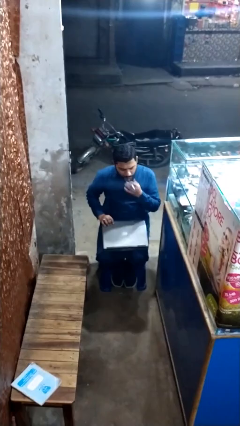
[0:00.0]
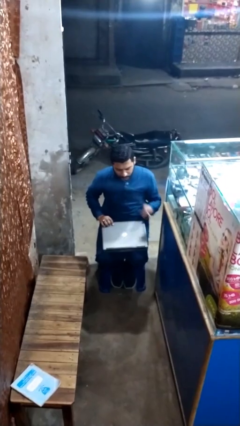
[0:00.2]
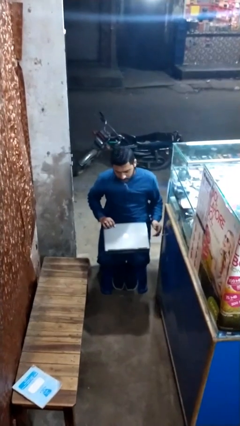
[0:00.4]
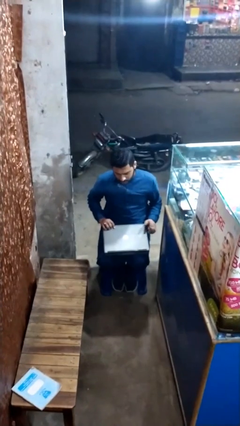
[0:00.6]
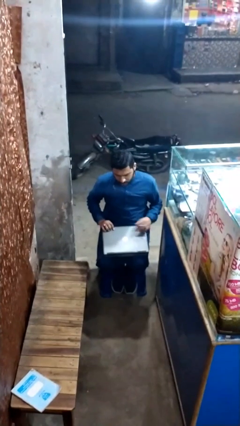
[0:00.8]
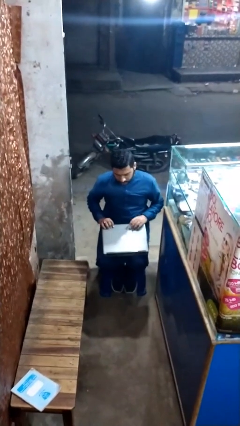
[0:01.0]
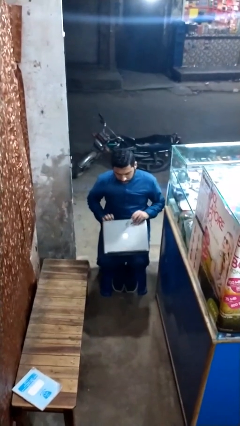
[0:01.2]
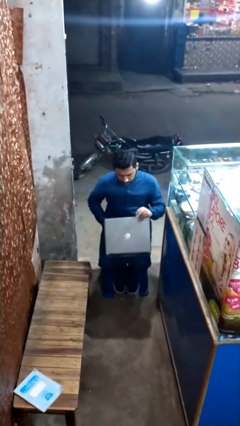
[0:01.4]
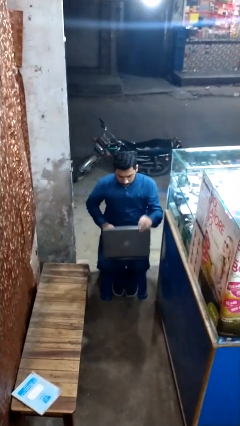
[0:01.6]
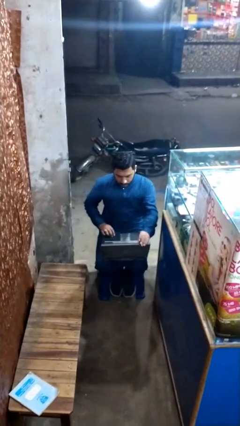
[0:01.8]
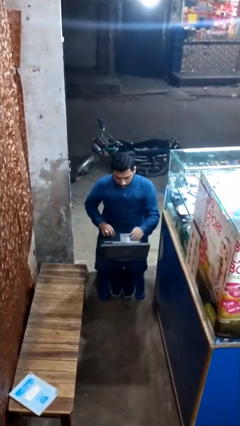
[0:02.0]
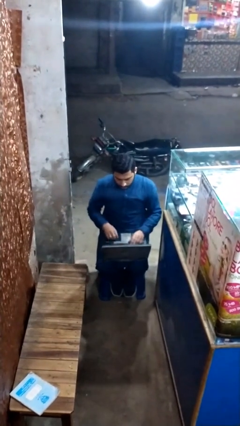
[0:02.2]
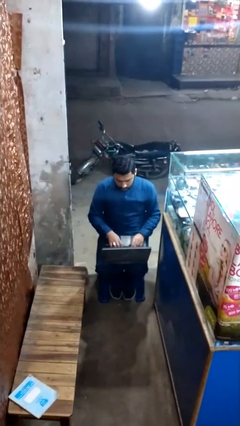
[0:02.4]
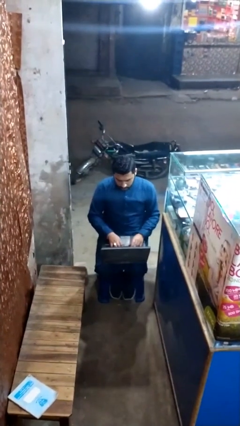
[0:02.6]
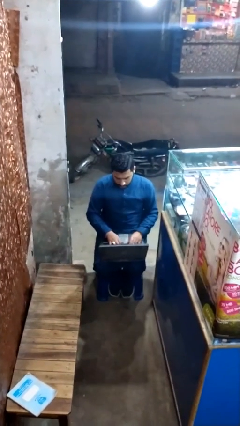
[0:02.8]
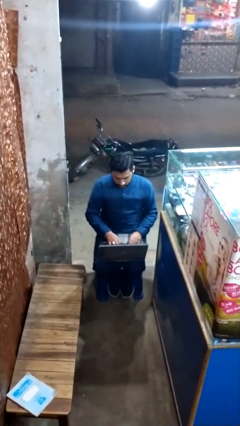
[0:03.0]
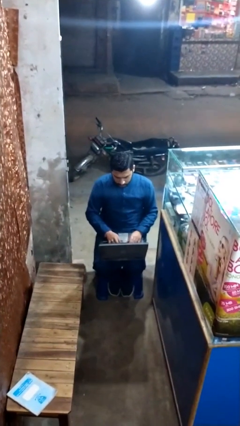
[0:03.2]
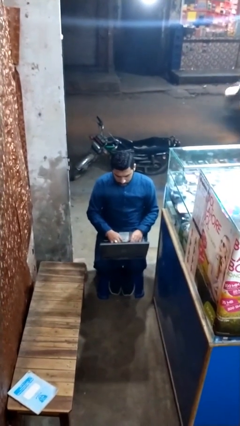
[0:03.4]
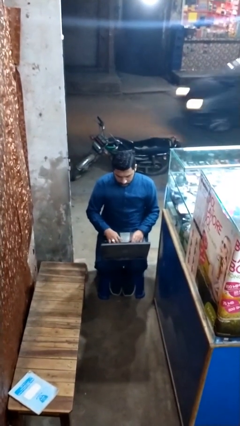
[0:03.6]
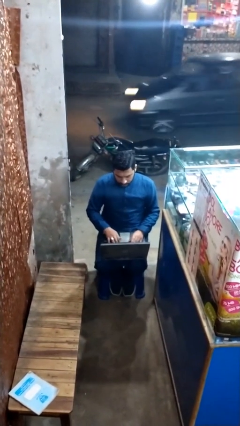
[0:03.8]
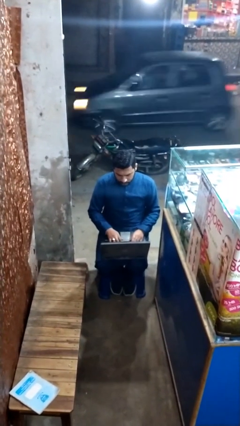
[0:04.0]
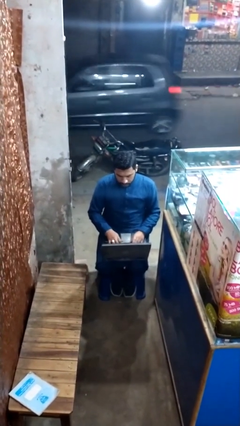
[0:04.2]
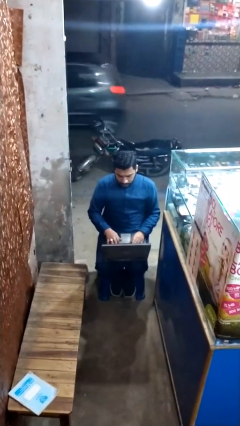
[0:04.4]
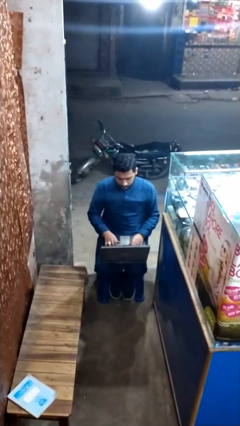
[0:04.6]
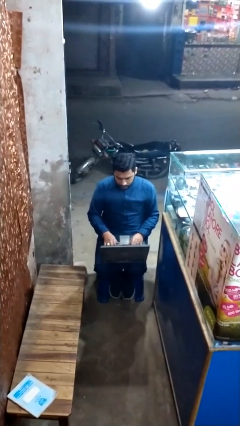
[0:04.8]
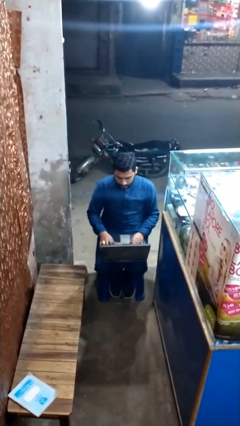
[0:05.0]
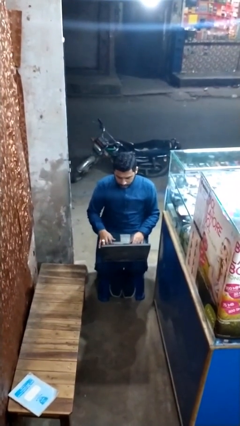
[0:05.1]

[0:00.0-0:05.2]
person interacts with laptop

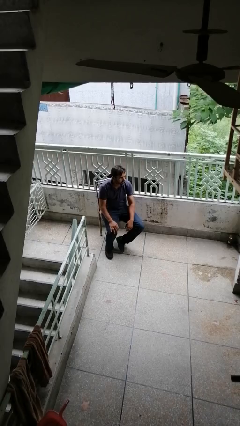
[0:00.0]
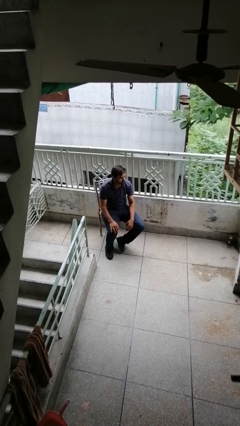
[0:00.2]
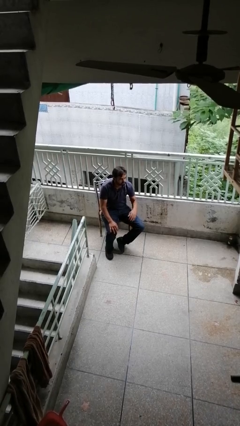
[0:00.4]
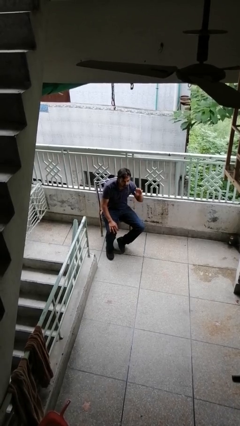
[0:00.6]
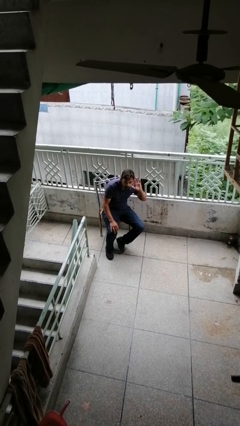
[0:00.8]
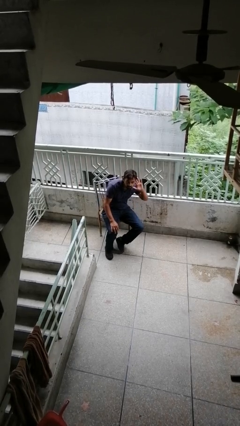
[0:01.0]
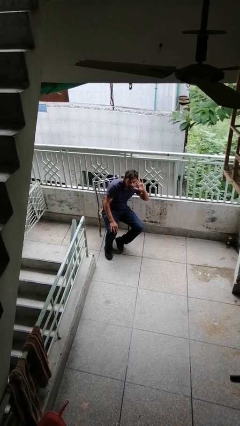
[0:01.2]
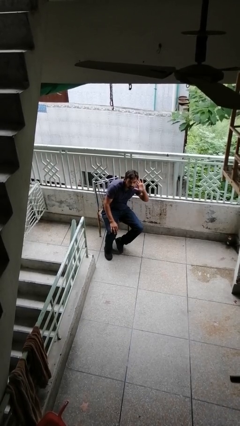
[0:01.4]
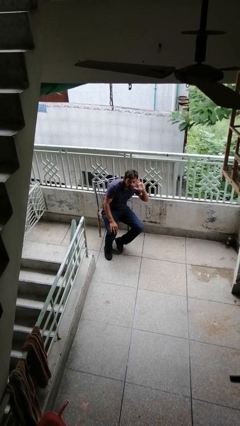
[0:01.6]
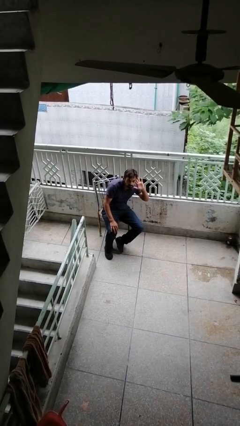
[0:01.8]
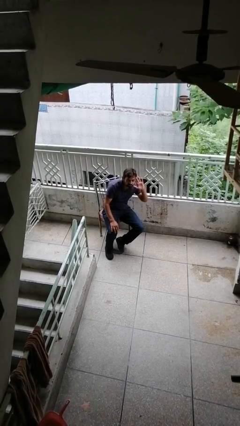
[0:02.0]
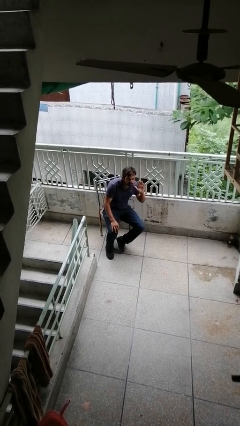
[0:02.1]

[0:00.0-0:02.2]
person gestures listen closely

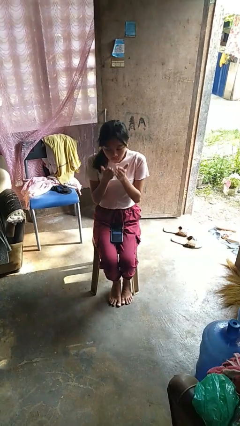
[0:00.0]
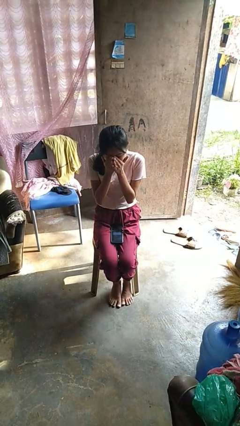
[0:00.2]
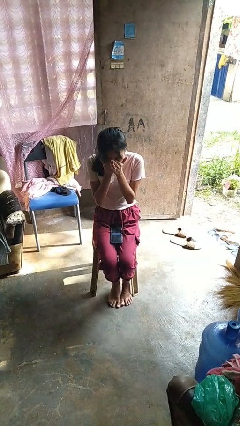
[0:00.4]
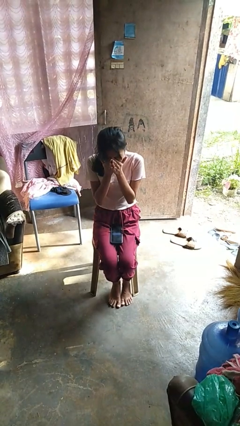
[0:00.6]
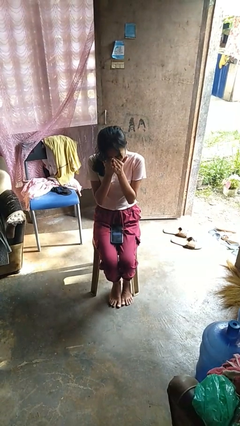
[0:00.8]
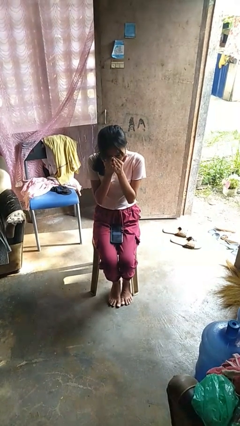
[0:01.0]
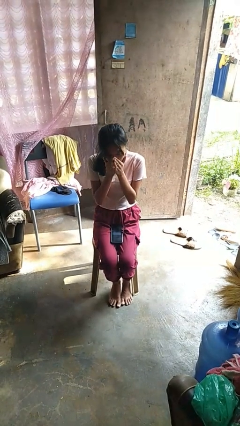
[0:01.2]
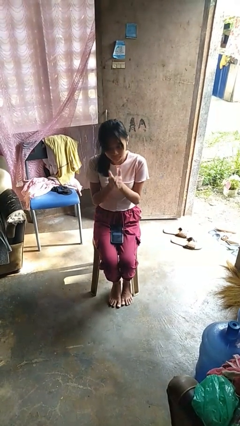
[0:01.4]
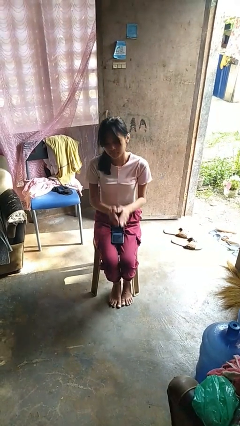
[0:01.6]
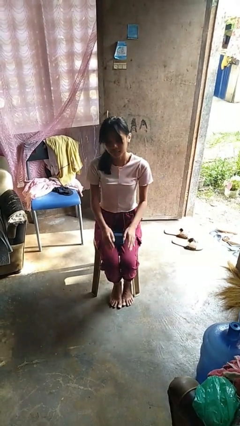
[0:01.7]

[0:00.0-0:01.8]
person sneezes into hand

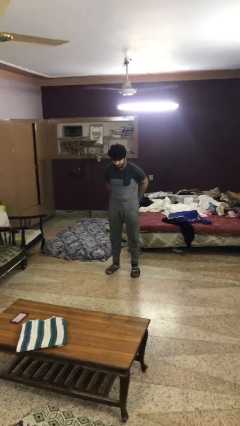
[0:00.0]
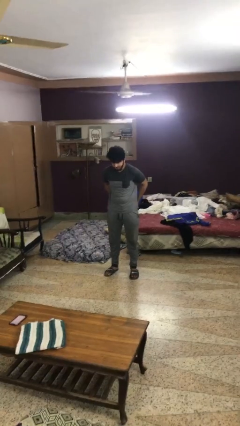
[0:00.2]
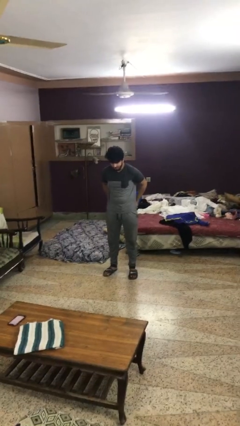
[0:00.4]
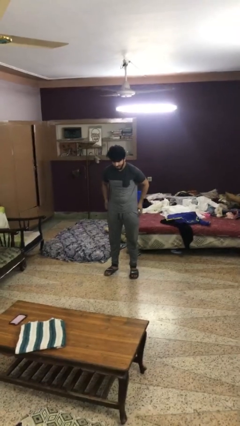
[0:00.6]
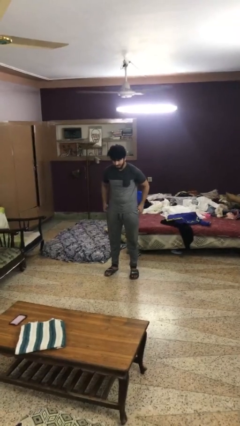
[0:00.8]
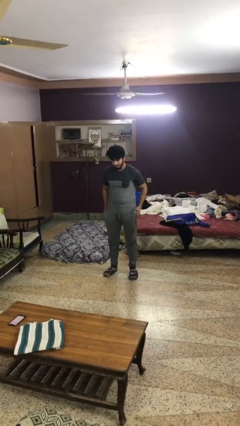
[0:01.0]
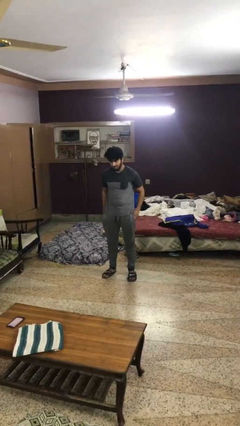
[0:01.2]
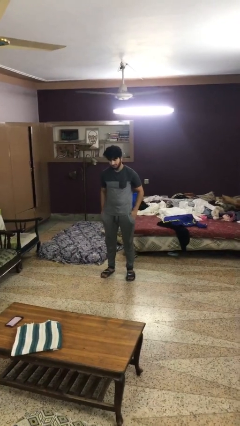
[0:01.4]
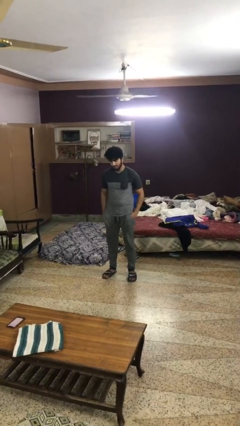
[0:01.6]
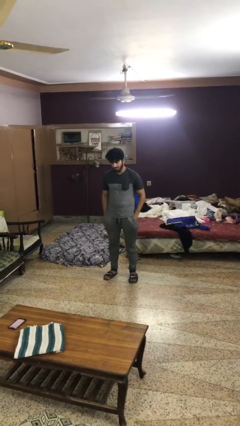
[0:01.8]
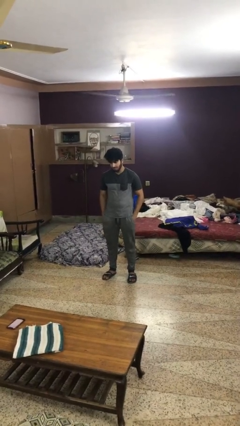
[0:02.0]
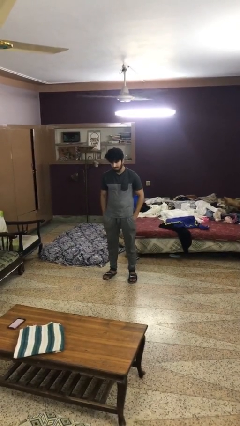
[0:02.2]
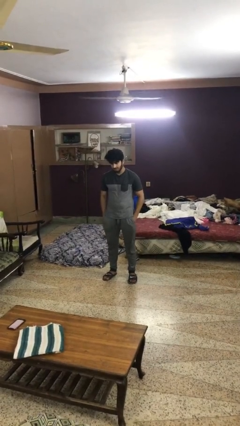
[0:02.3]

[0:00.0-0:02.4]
person puts hands in back pockets

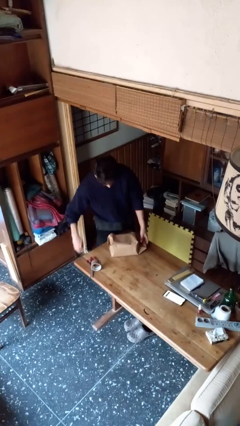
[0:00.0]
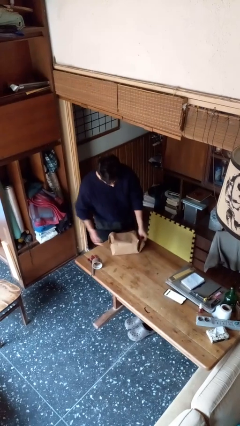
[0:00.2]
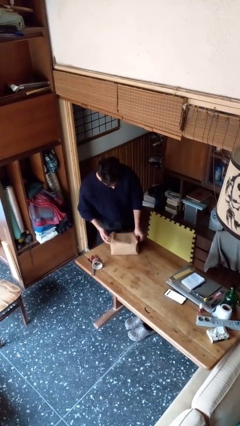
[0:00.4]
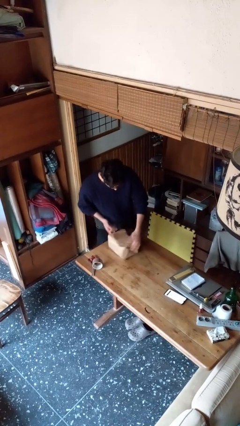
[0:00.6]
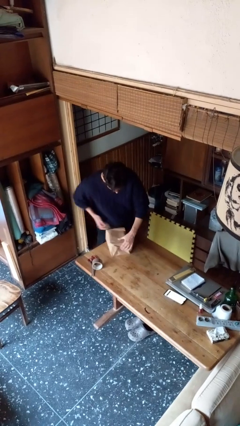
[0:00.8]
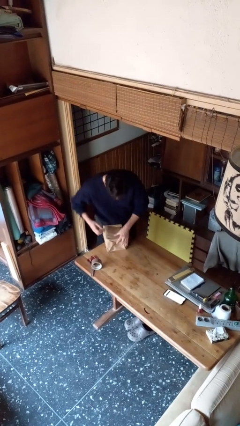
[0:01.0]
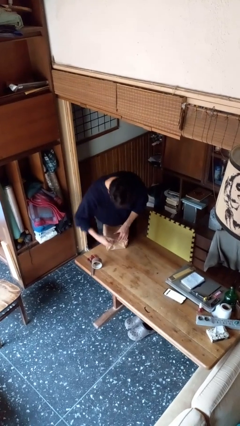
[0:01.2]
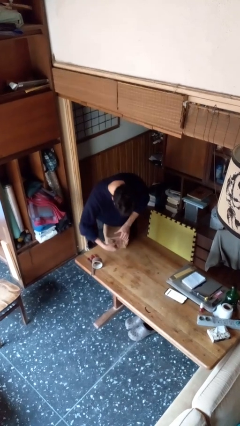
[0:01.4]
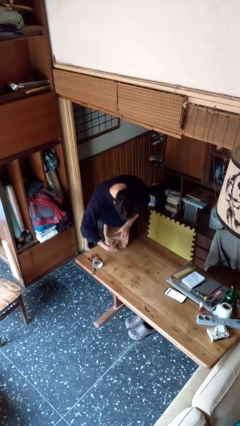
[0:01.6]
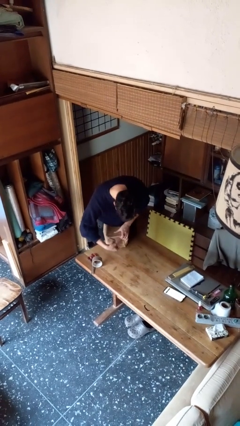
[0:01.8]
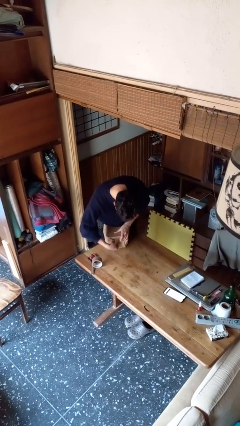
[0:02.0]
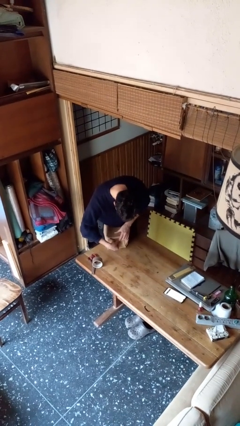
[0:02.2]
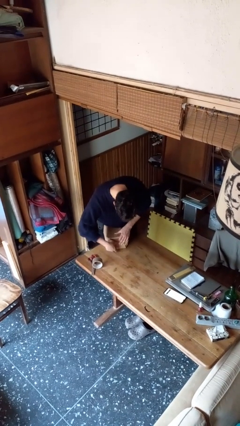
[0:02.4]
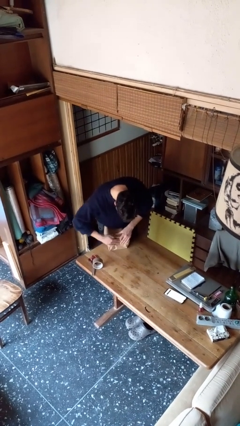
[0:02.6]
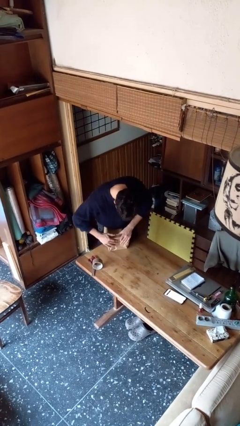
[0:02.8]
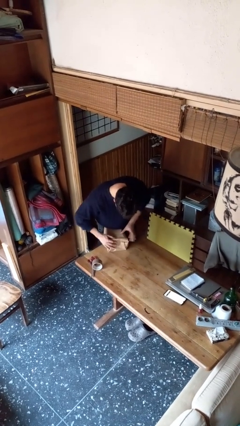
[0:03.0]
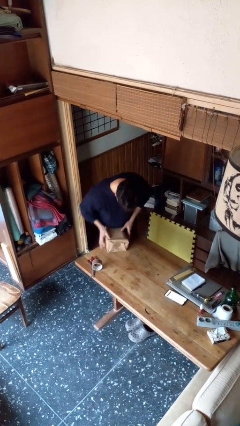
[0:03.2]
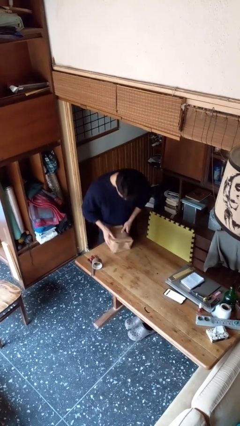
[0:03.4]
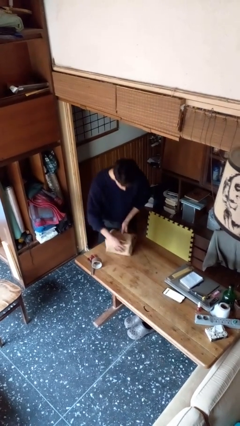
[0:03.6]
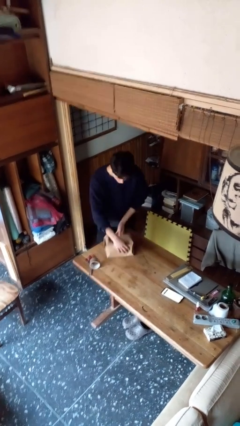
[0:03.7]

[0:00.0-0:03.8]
person wraps box

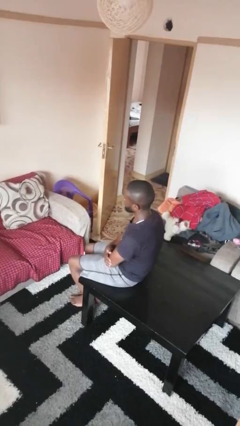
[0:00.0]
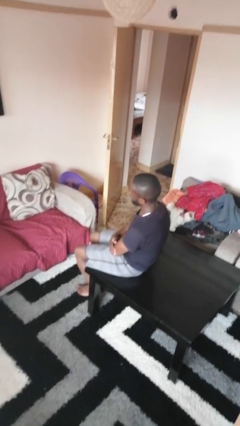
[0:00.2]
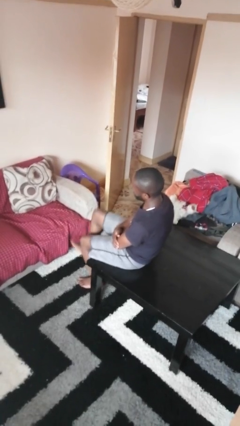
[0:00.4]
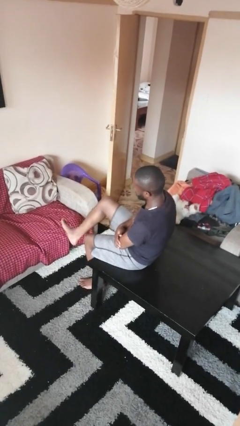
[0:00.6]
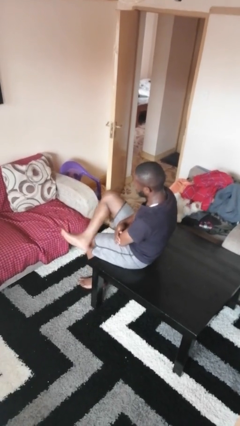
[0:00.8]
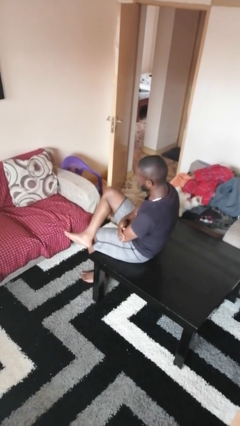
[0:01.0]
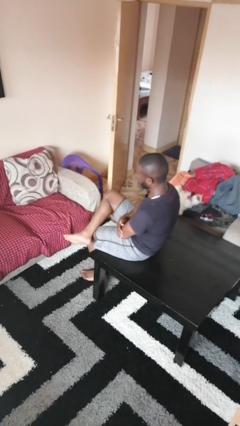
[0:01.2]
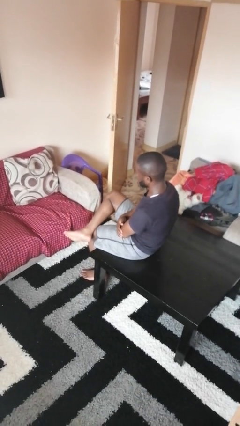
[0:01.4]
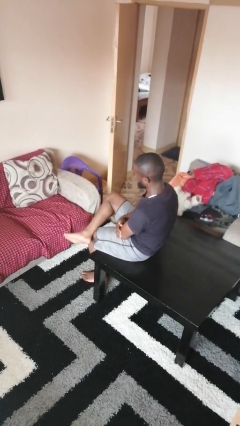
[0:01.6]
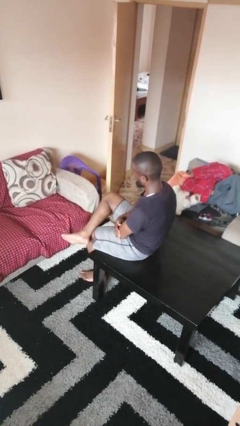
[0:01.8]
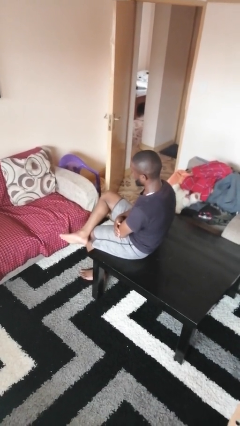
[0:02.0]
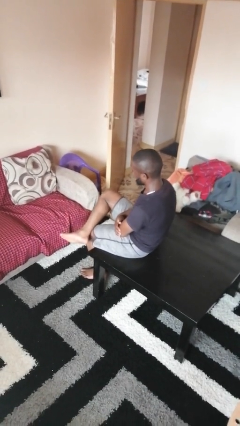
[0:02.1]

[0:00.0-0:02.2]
person crosses legs
